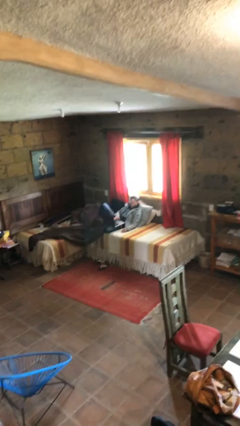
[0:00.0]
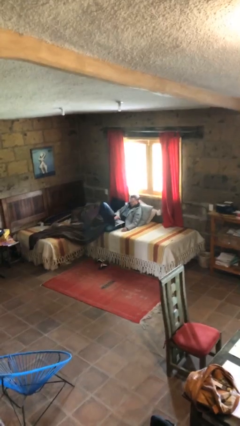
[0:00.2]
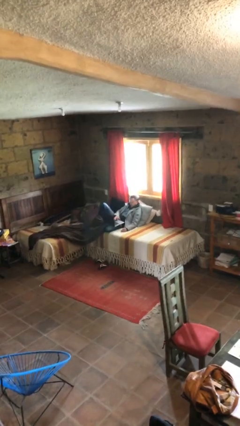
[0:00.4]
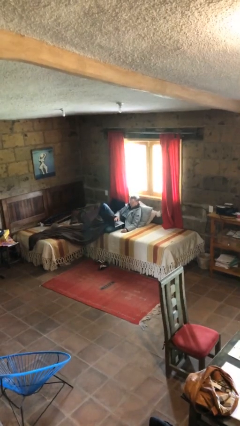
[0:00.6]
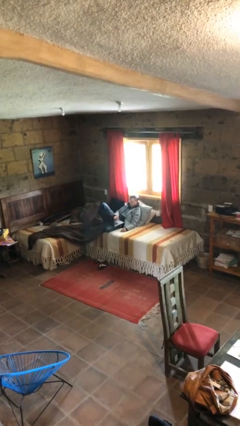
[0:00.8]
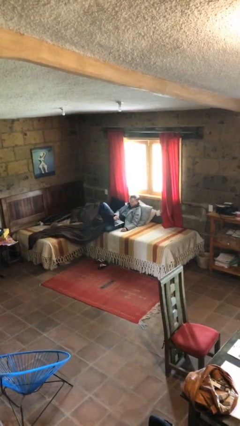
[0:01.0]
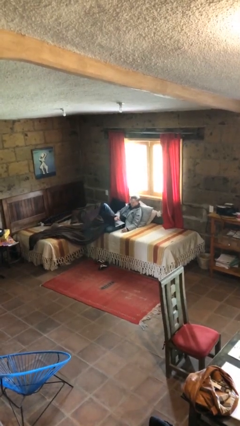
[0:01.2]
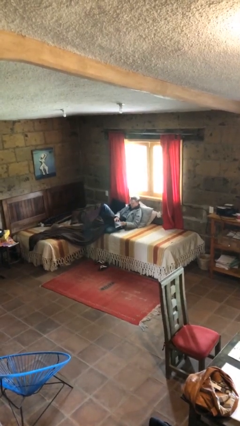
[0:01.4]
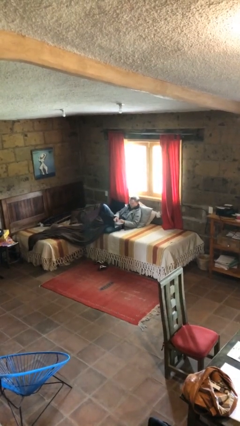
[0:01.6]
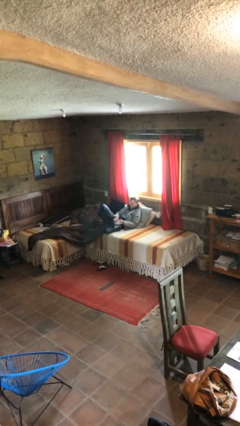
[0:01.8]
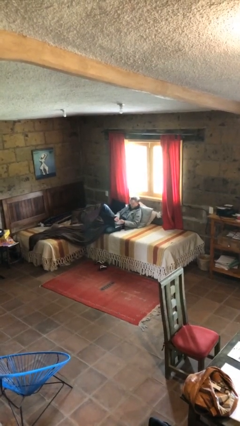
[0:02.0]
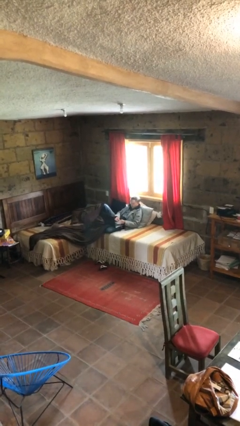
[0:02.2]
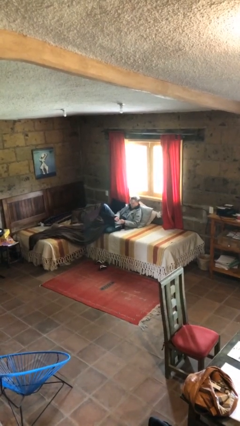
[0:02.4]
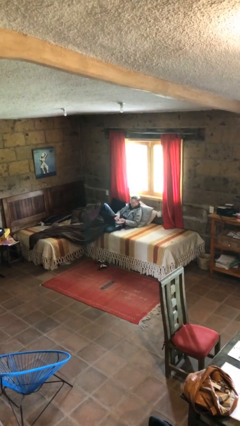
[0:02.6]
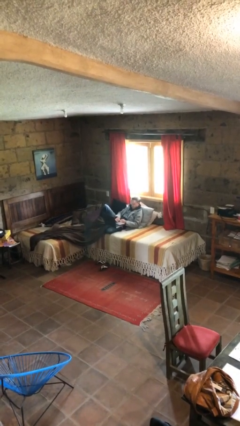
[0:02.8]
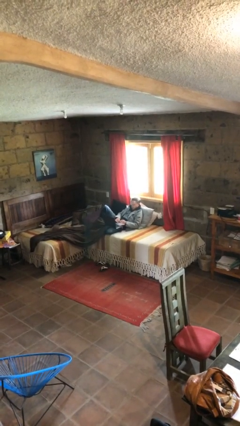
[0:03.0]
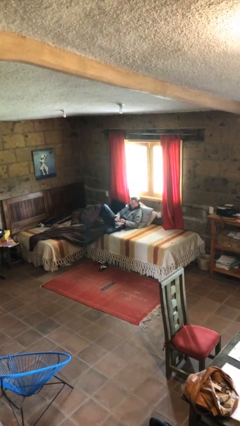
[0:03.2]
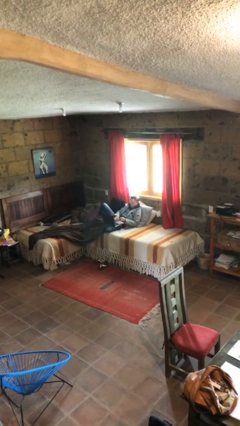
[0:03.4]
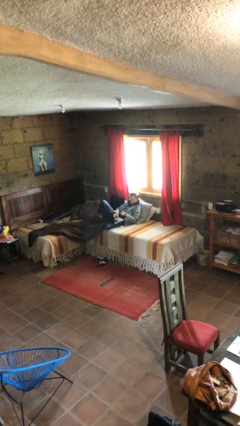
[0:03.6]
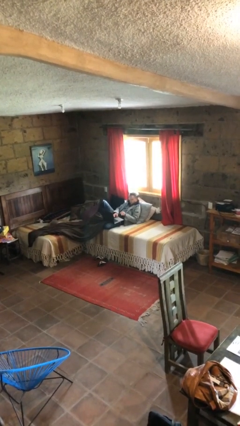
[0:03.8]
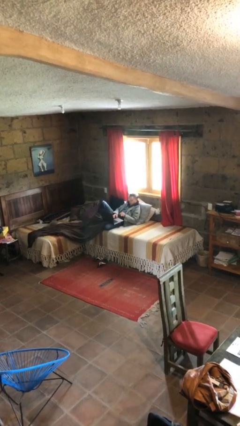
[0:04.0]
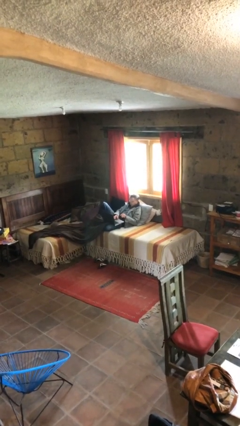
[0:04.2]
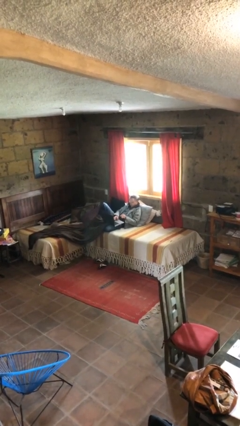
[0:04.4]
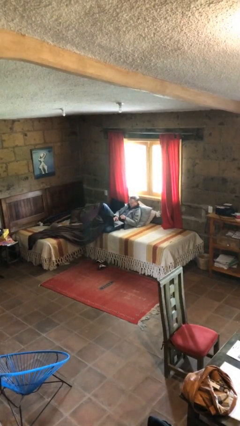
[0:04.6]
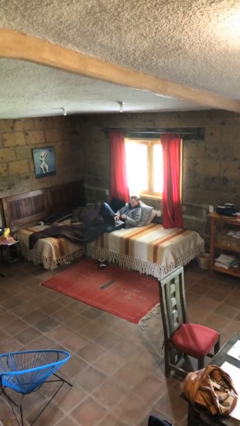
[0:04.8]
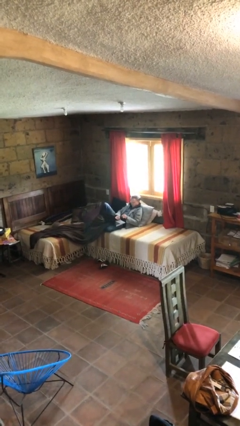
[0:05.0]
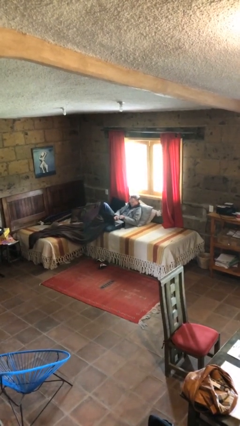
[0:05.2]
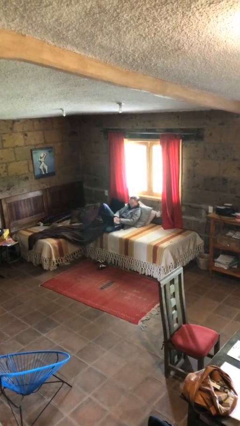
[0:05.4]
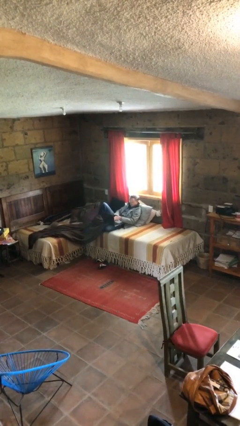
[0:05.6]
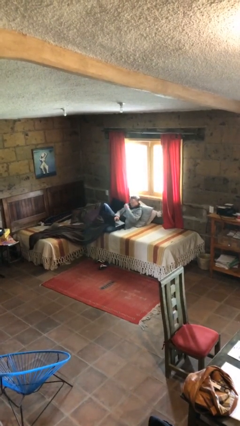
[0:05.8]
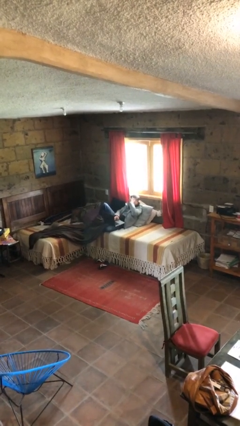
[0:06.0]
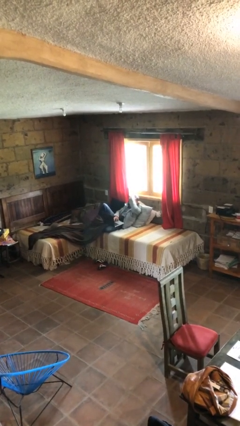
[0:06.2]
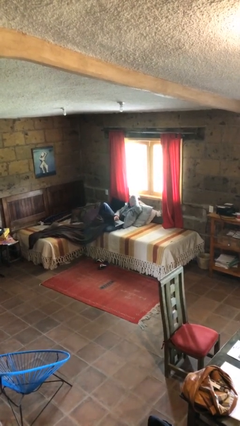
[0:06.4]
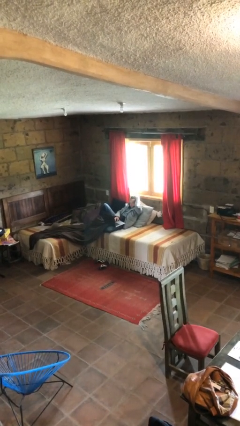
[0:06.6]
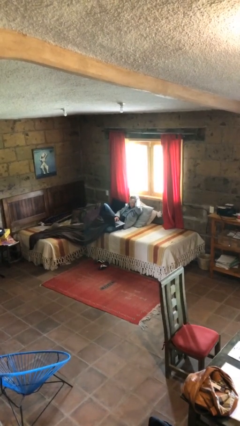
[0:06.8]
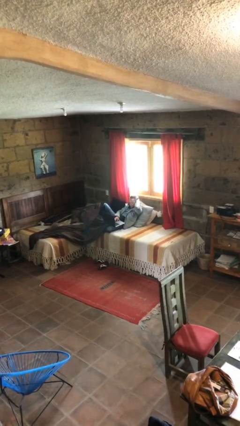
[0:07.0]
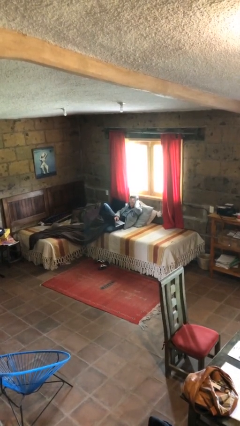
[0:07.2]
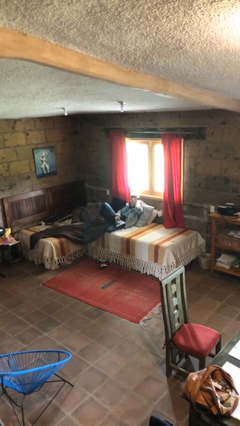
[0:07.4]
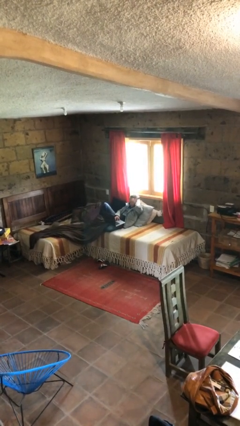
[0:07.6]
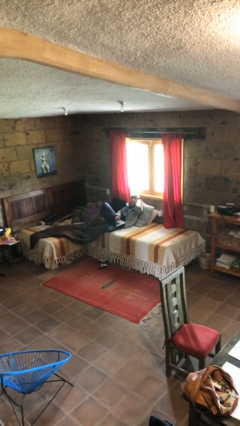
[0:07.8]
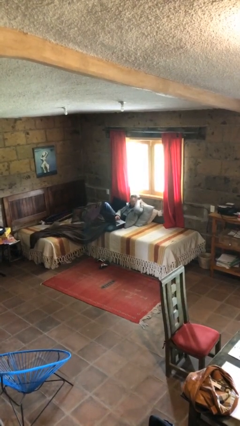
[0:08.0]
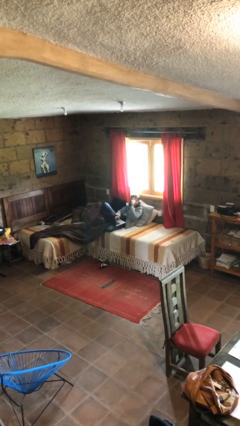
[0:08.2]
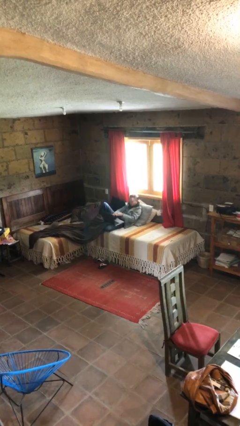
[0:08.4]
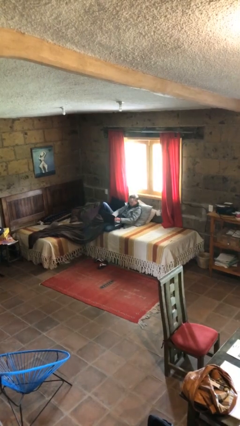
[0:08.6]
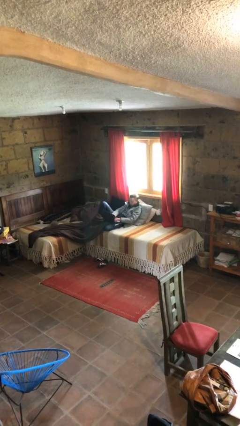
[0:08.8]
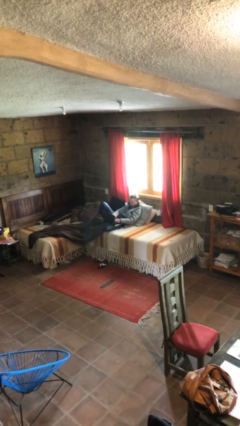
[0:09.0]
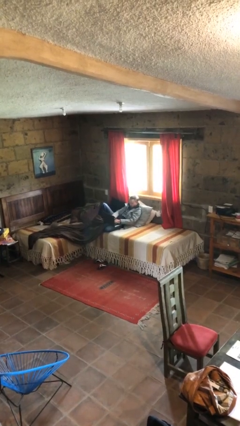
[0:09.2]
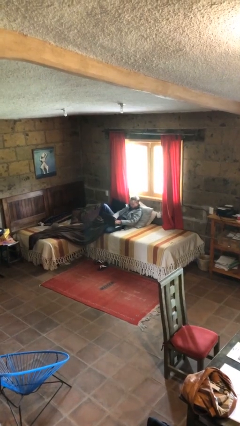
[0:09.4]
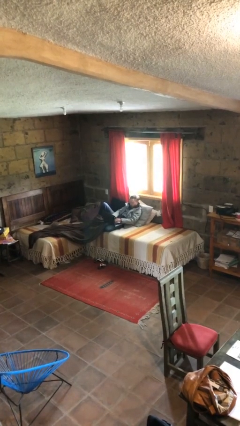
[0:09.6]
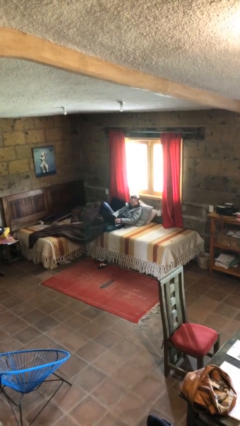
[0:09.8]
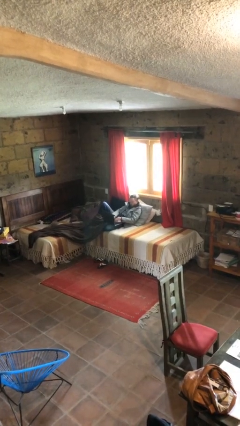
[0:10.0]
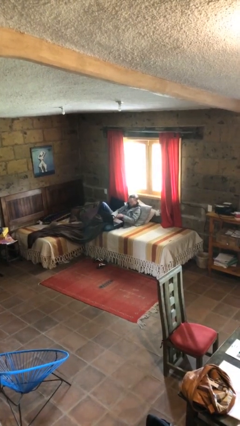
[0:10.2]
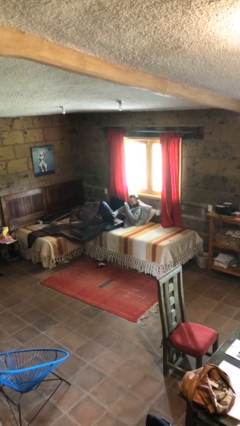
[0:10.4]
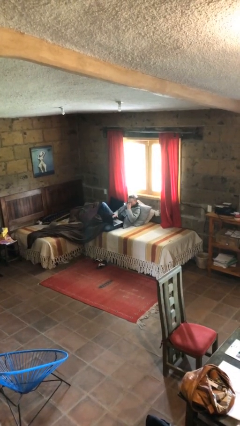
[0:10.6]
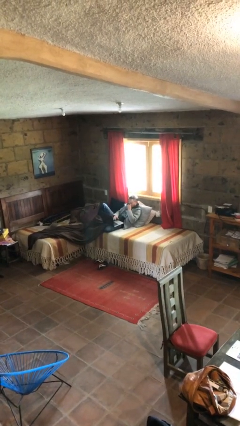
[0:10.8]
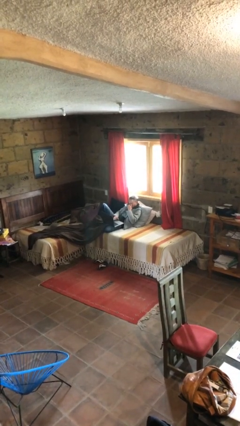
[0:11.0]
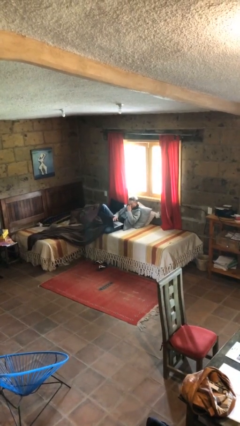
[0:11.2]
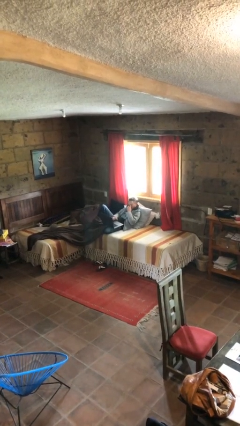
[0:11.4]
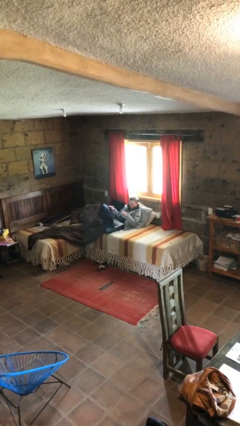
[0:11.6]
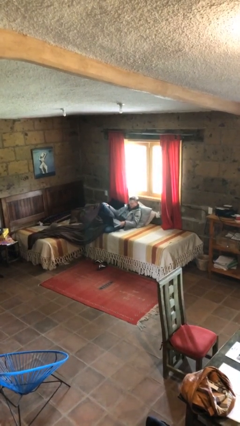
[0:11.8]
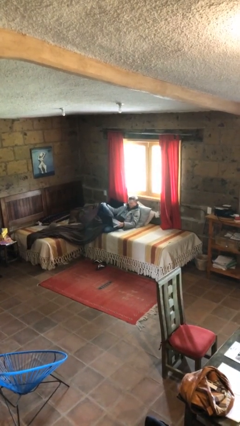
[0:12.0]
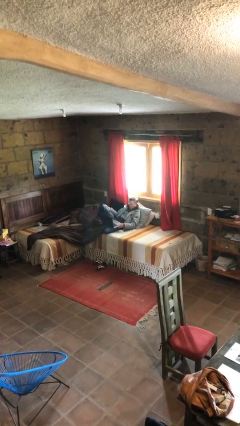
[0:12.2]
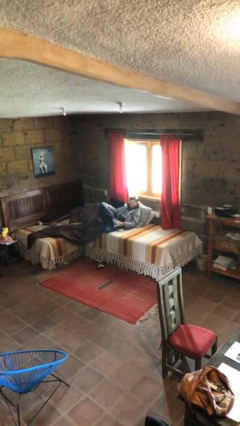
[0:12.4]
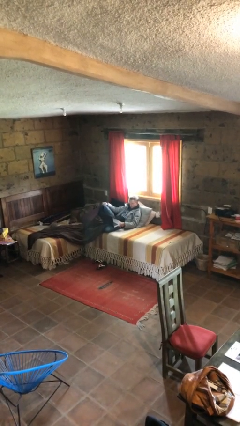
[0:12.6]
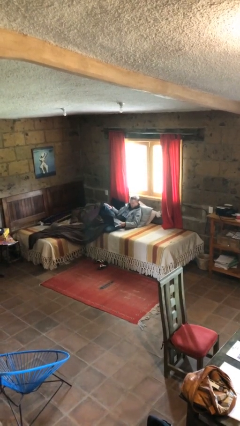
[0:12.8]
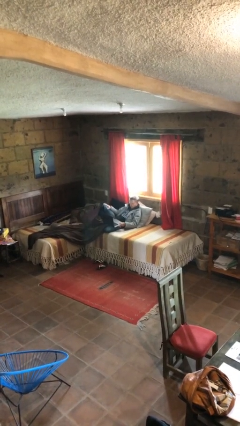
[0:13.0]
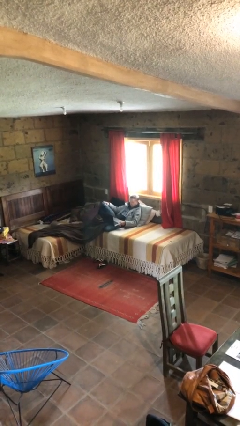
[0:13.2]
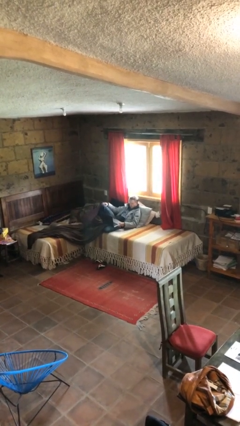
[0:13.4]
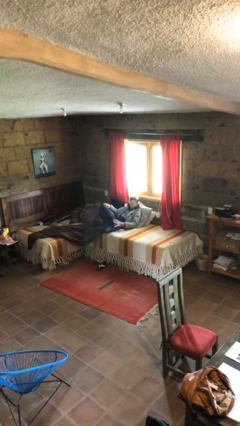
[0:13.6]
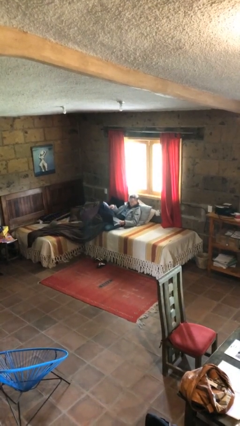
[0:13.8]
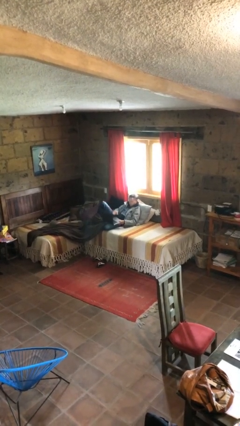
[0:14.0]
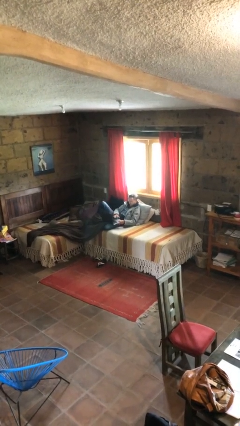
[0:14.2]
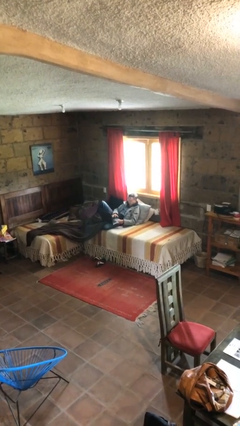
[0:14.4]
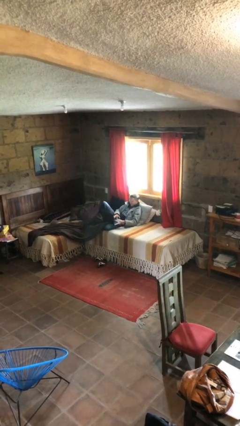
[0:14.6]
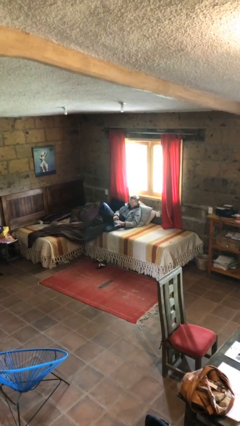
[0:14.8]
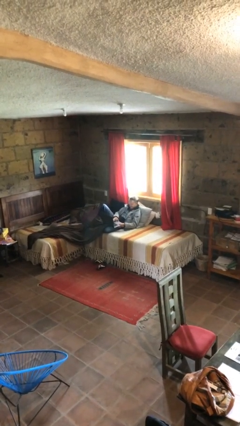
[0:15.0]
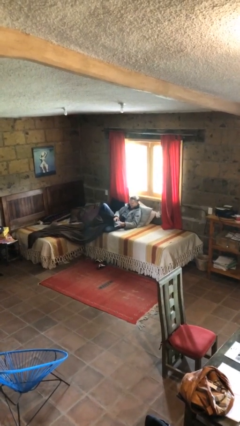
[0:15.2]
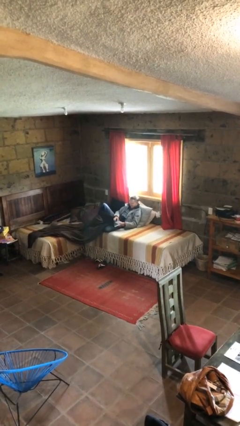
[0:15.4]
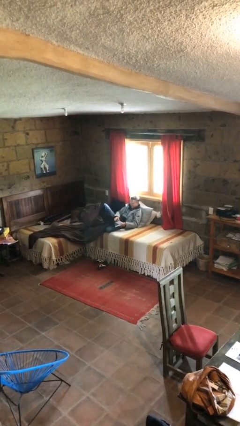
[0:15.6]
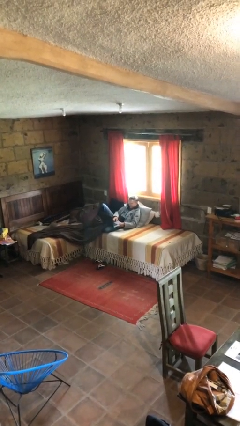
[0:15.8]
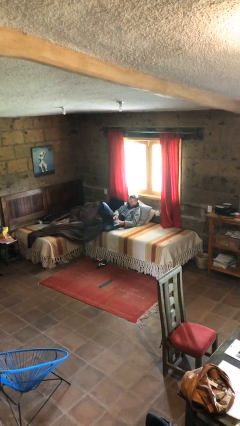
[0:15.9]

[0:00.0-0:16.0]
person interacts with laptop

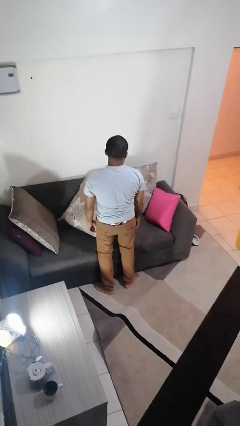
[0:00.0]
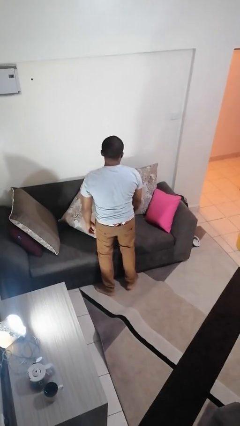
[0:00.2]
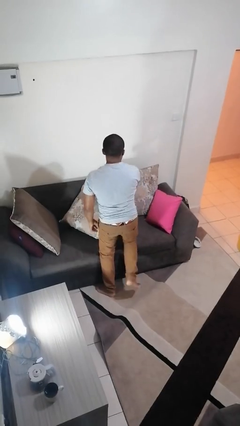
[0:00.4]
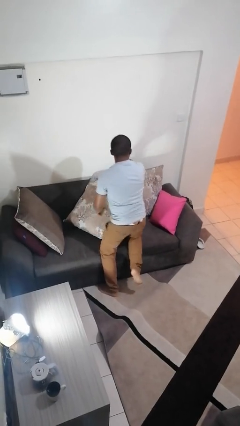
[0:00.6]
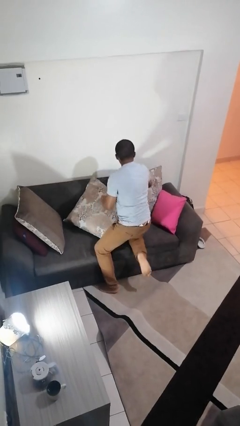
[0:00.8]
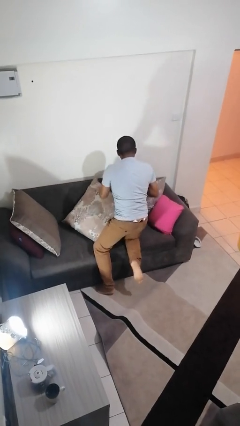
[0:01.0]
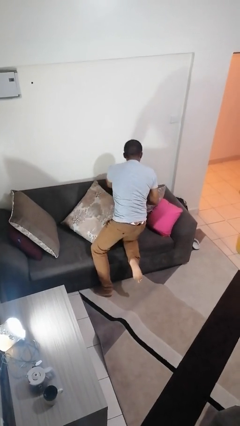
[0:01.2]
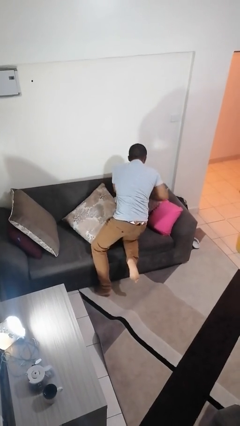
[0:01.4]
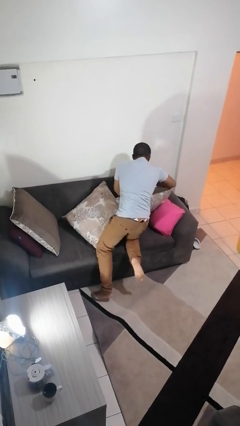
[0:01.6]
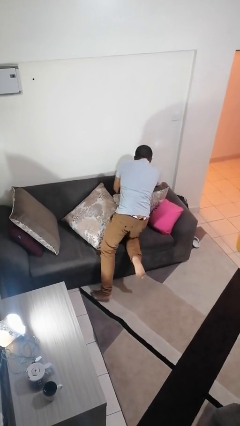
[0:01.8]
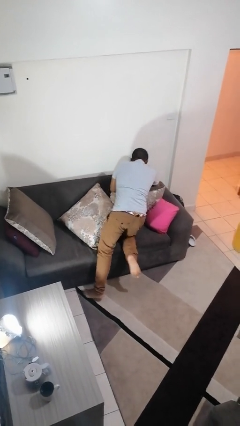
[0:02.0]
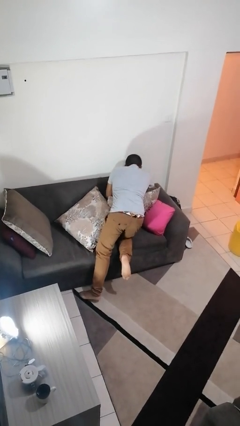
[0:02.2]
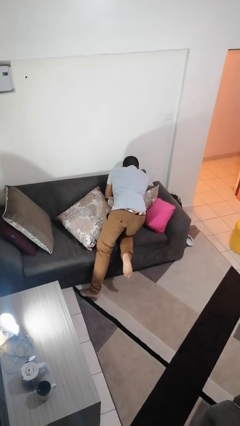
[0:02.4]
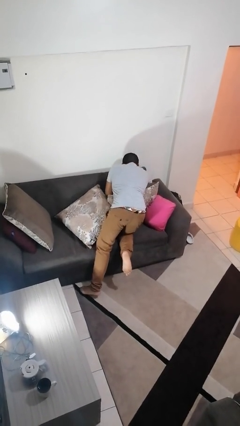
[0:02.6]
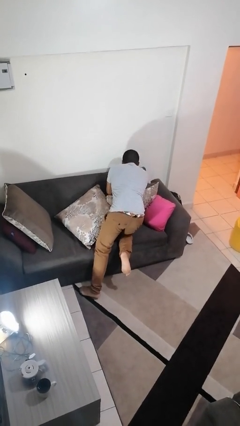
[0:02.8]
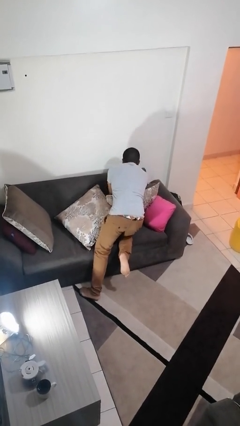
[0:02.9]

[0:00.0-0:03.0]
person searches in couch
